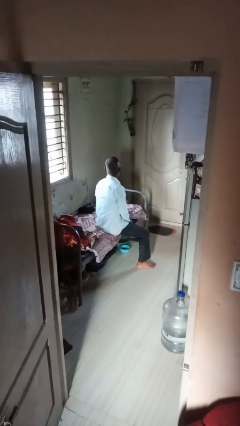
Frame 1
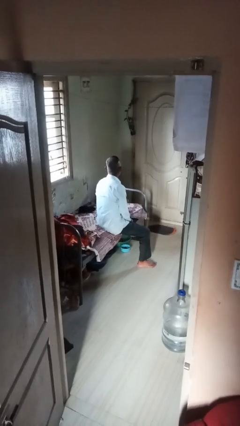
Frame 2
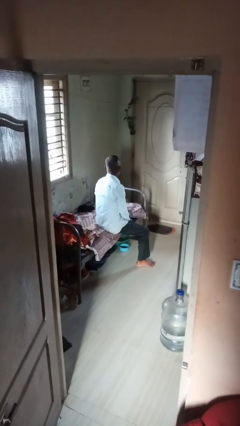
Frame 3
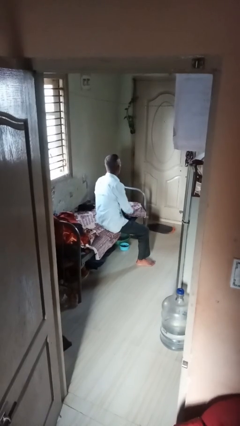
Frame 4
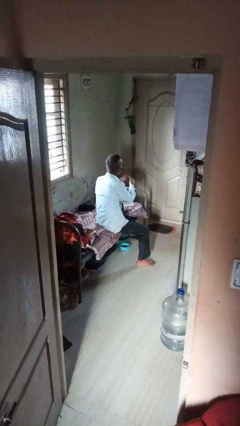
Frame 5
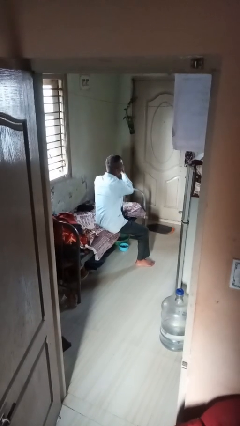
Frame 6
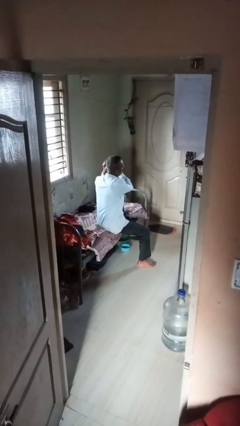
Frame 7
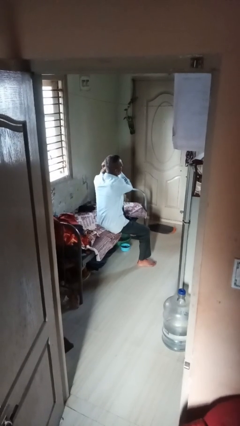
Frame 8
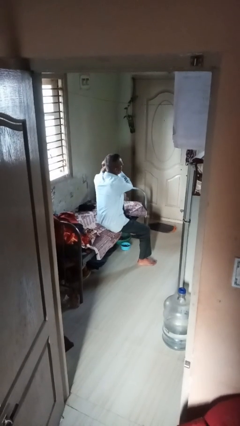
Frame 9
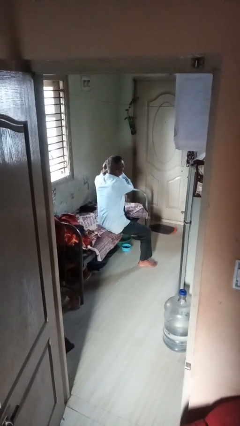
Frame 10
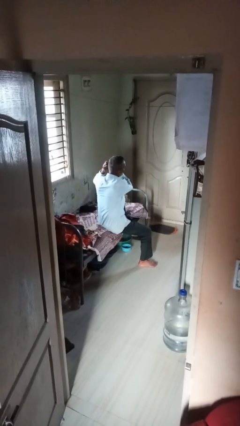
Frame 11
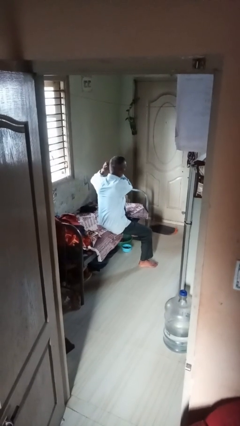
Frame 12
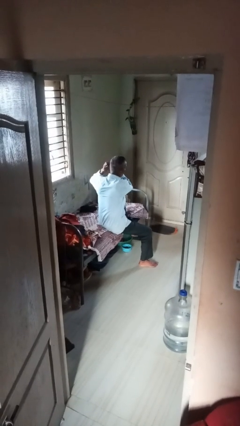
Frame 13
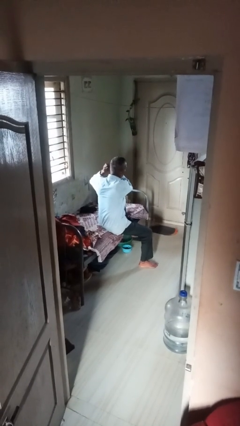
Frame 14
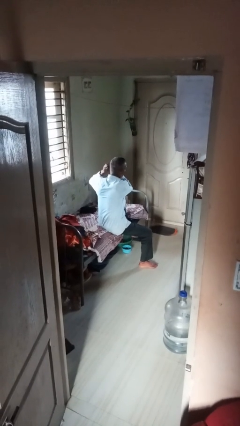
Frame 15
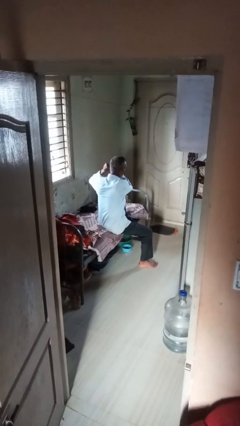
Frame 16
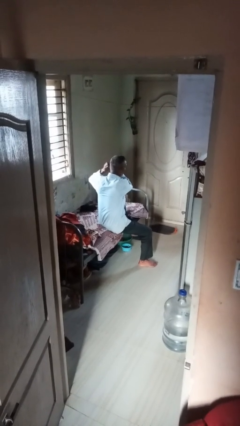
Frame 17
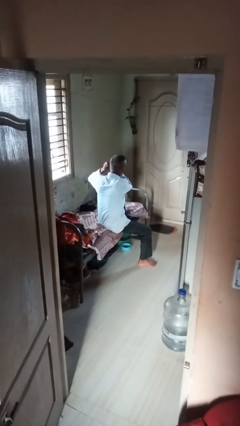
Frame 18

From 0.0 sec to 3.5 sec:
person puts on earrings

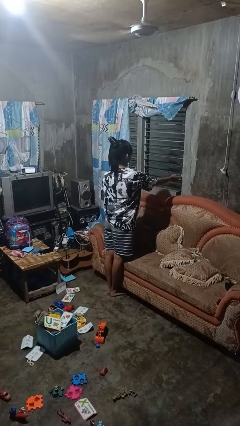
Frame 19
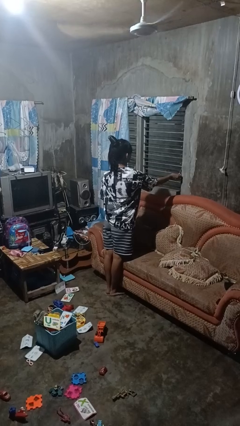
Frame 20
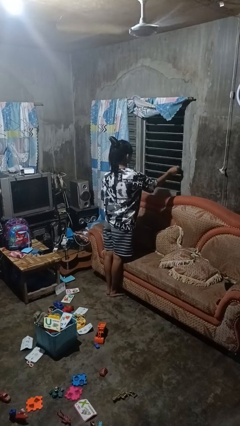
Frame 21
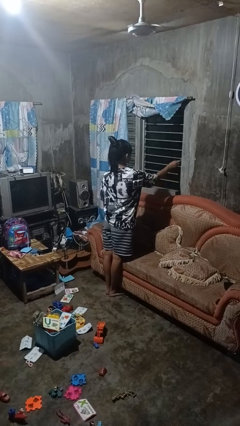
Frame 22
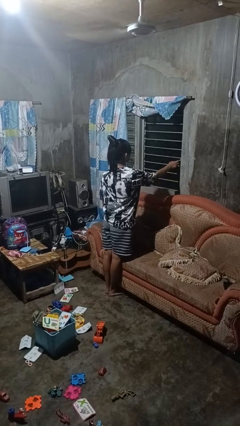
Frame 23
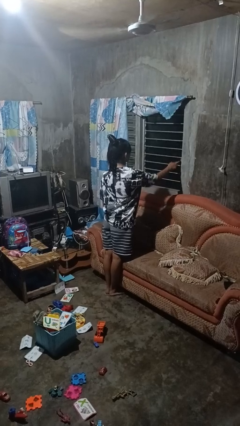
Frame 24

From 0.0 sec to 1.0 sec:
person closes home window

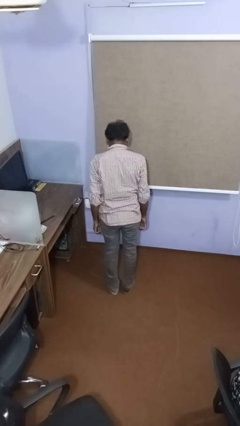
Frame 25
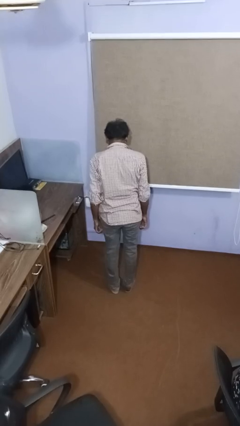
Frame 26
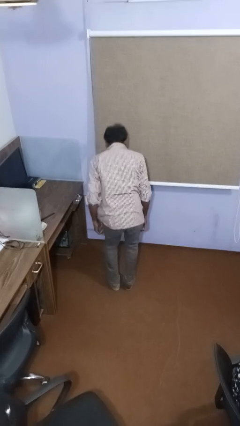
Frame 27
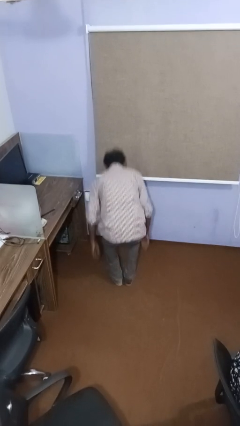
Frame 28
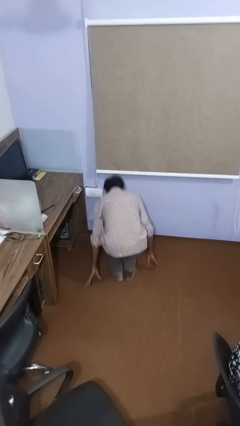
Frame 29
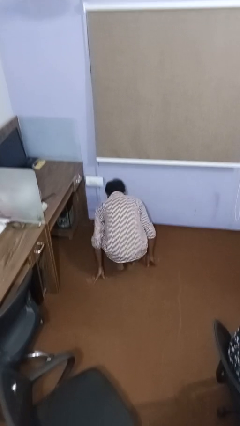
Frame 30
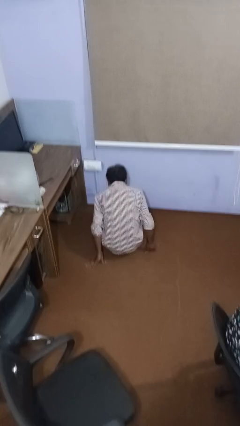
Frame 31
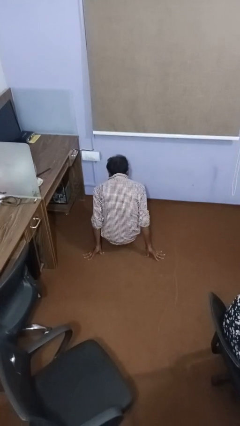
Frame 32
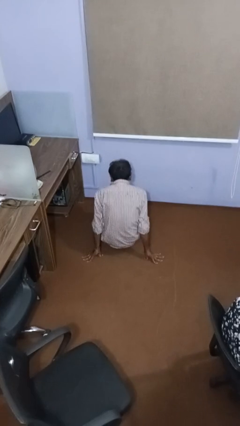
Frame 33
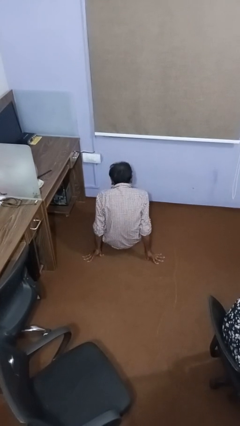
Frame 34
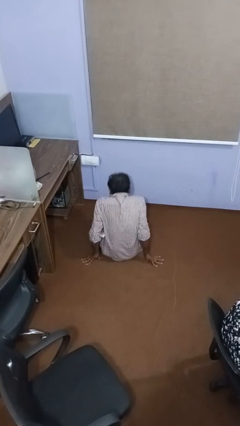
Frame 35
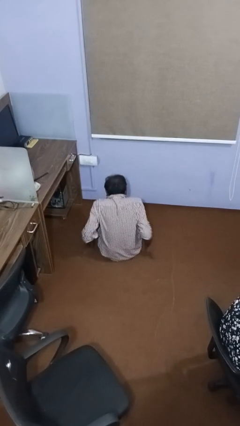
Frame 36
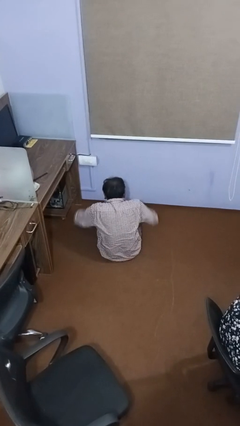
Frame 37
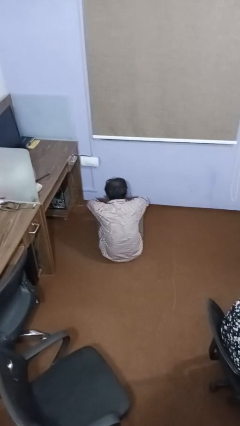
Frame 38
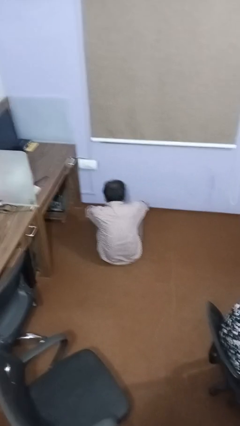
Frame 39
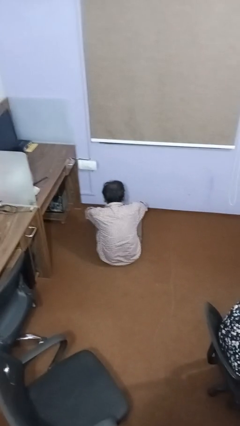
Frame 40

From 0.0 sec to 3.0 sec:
person crosses legs

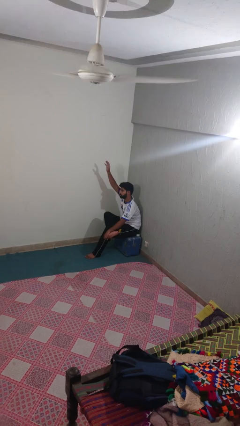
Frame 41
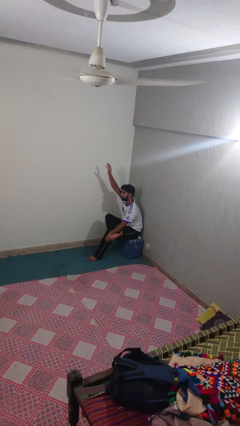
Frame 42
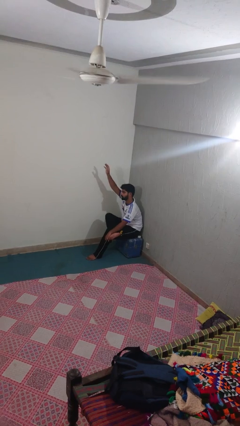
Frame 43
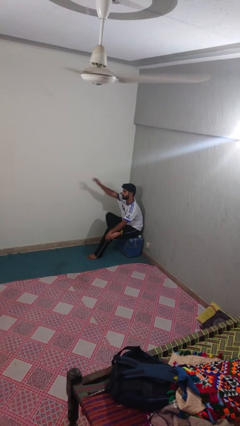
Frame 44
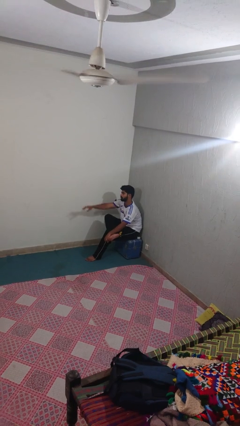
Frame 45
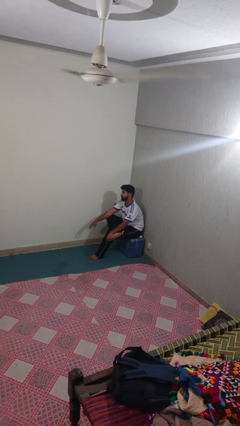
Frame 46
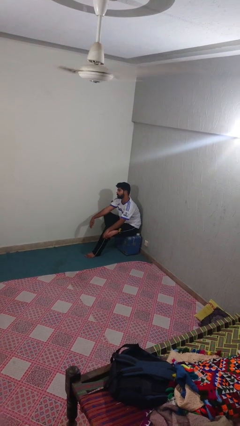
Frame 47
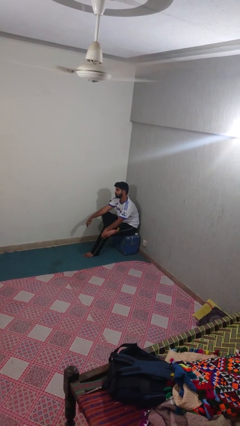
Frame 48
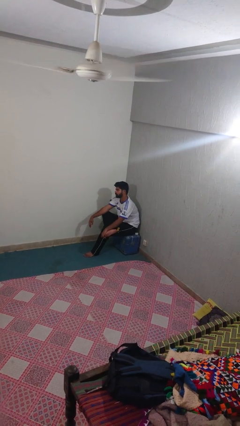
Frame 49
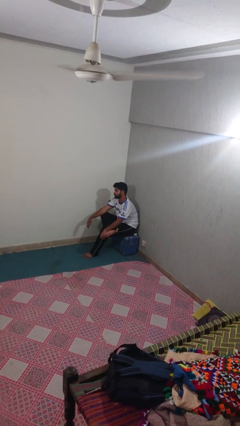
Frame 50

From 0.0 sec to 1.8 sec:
person gestures lower hand

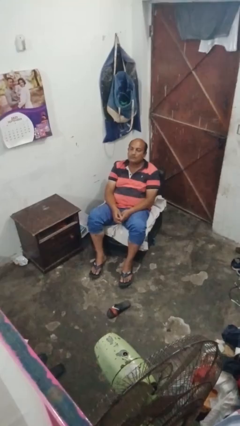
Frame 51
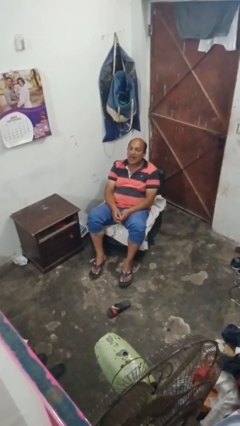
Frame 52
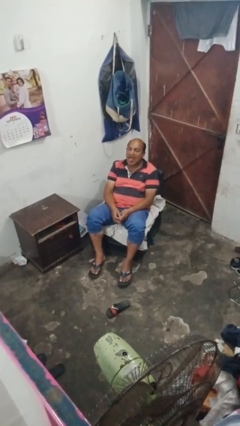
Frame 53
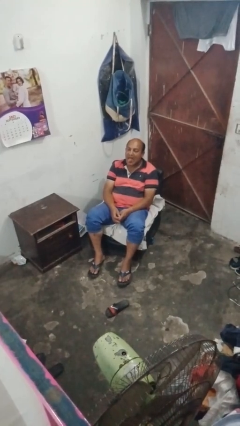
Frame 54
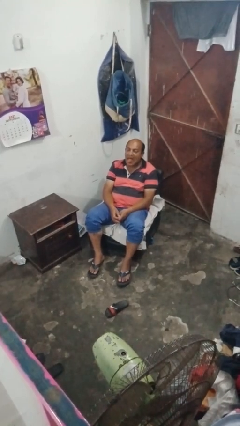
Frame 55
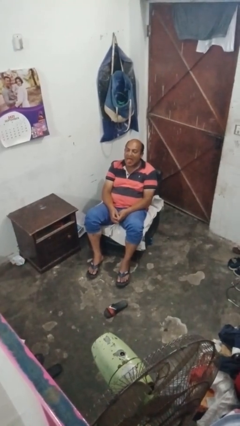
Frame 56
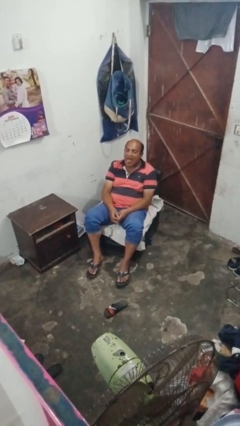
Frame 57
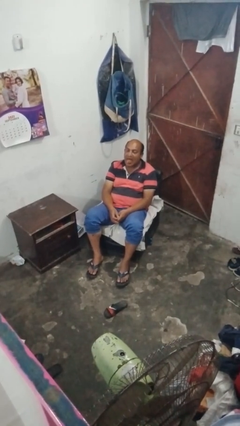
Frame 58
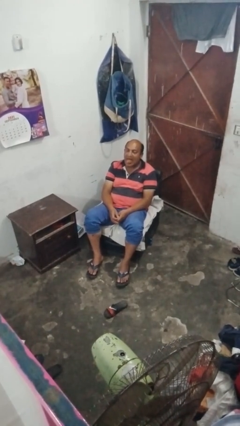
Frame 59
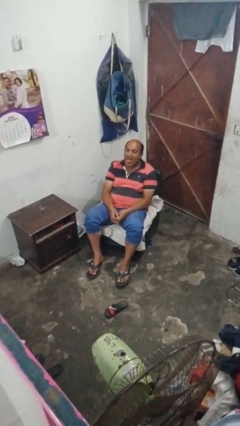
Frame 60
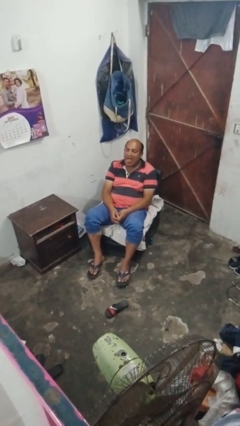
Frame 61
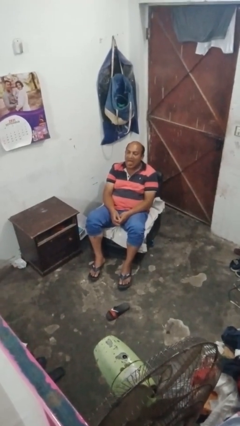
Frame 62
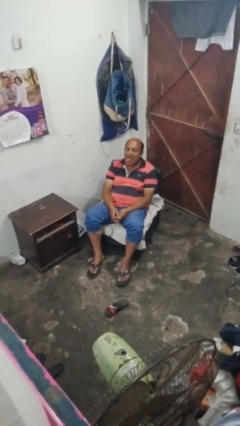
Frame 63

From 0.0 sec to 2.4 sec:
person sticks out tongue

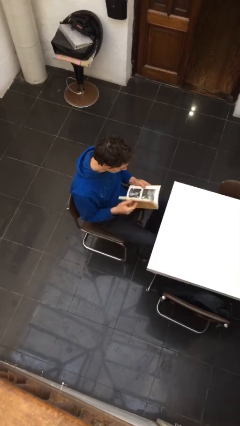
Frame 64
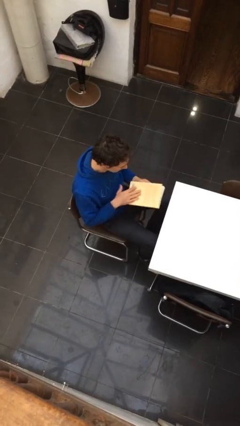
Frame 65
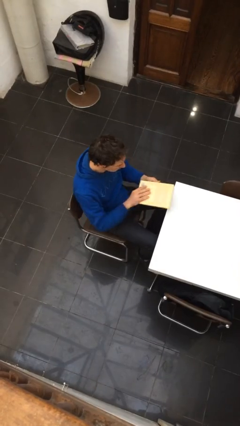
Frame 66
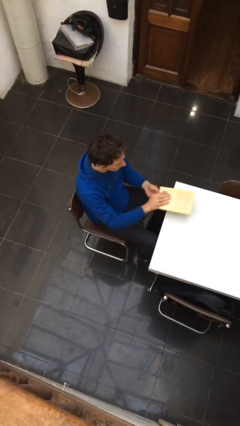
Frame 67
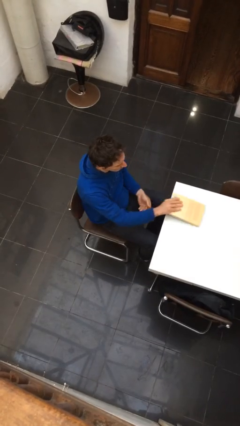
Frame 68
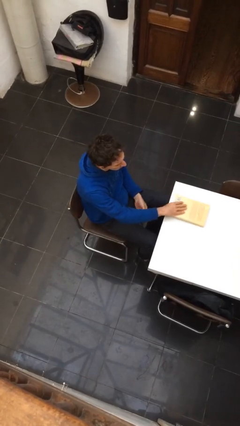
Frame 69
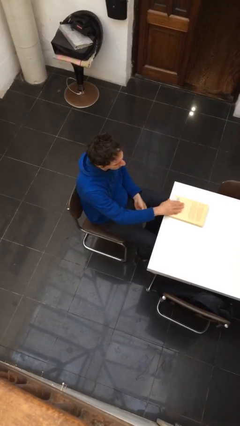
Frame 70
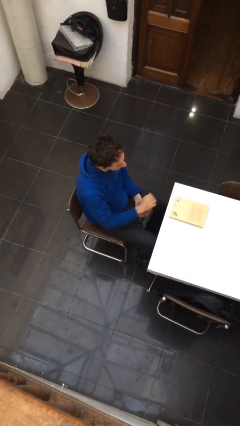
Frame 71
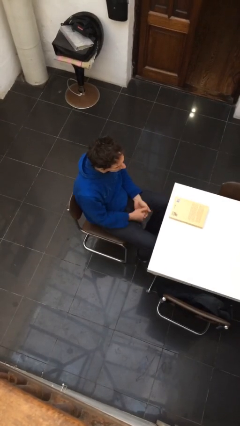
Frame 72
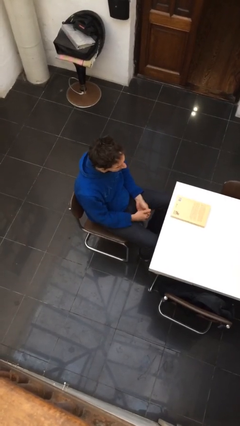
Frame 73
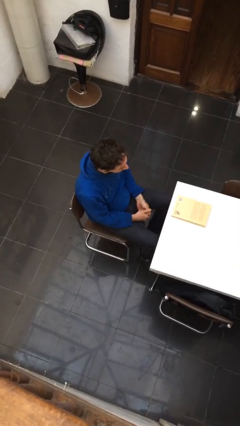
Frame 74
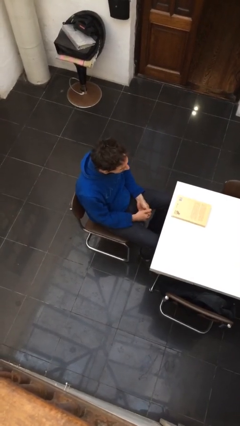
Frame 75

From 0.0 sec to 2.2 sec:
person puts down object on table

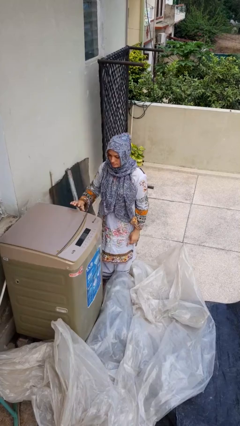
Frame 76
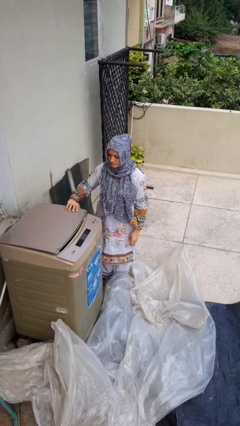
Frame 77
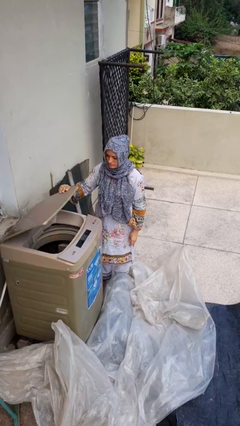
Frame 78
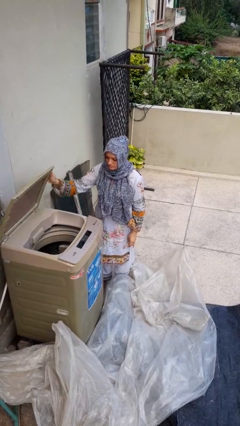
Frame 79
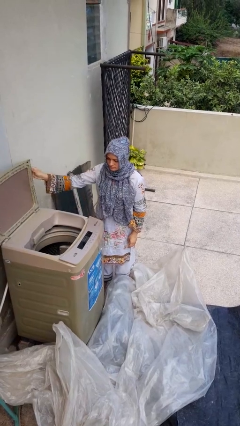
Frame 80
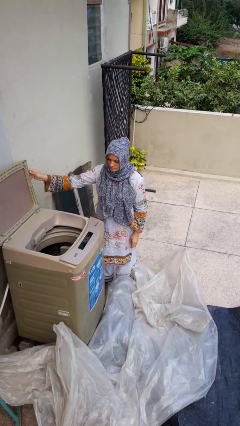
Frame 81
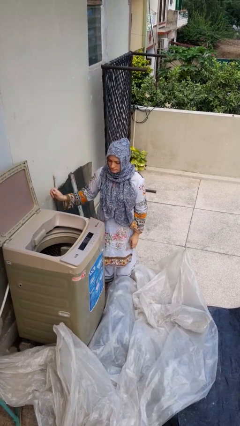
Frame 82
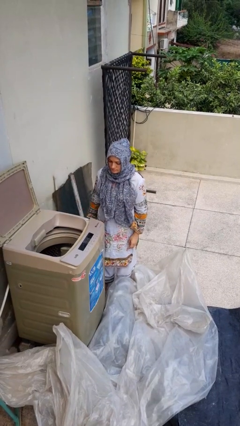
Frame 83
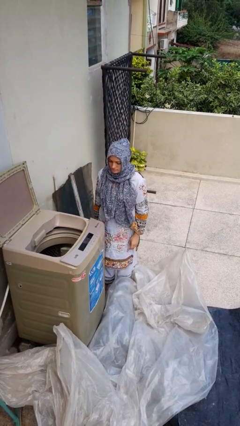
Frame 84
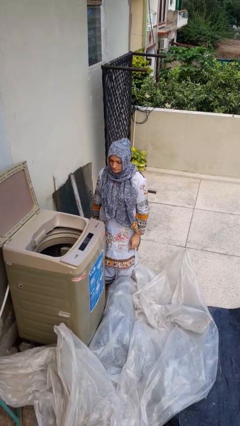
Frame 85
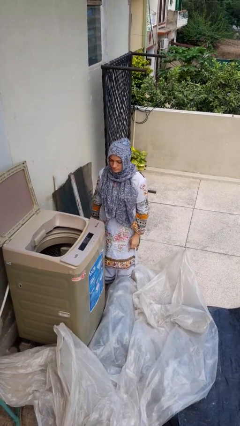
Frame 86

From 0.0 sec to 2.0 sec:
person opens clothes washer

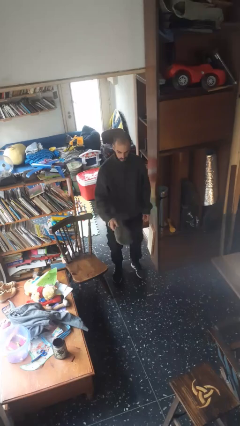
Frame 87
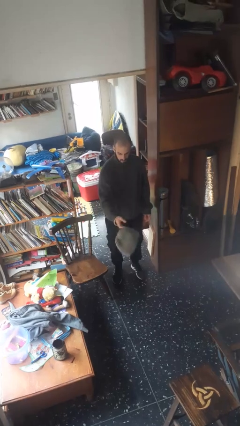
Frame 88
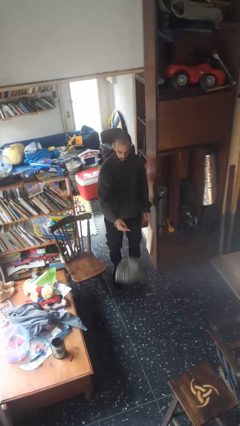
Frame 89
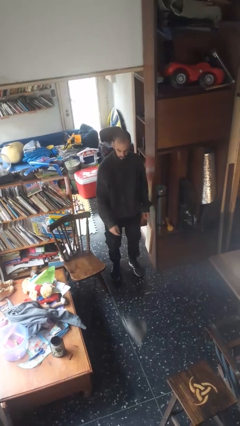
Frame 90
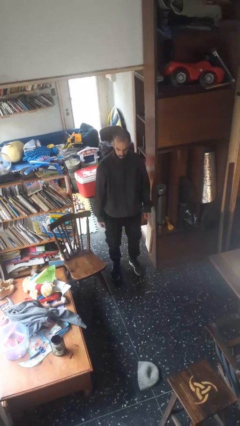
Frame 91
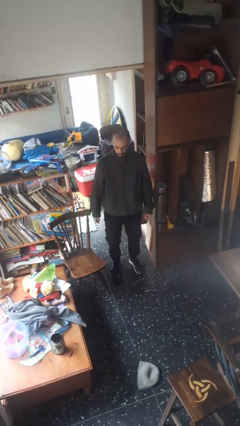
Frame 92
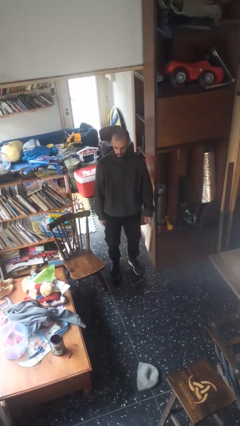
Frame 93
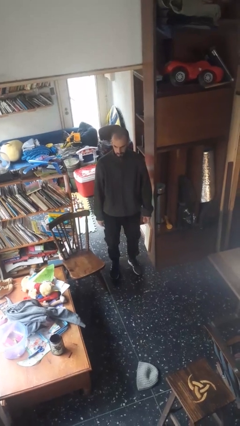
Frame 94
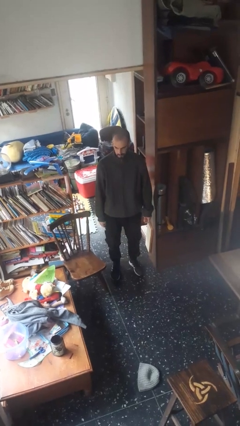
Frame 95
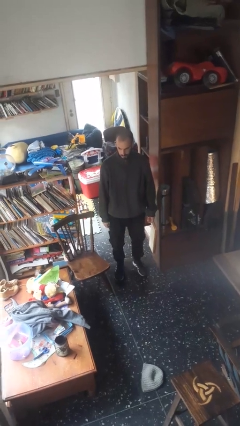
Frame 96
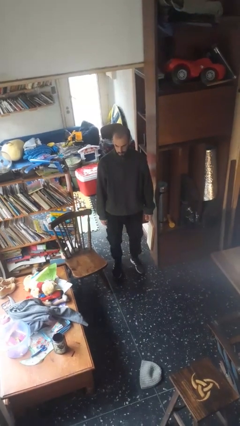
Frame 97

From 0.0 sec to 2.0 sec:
person throws object to ground
